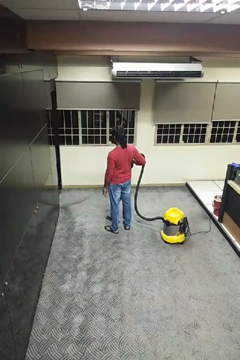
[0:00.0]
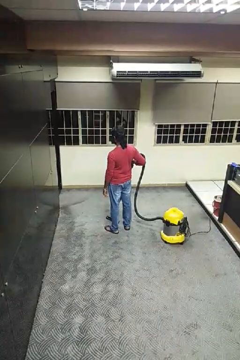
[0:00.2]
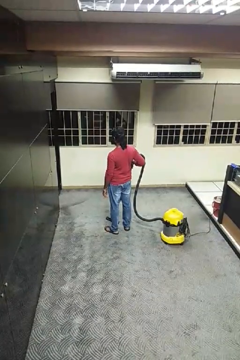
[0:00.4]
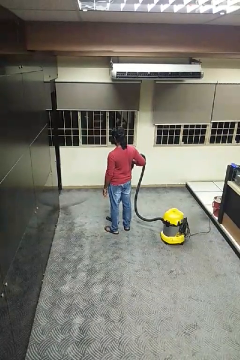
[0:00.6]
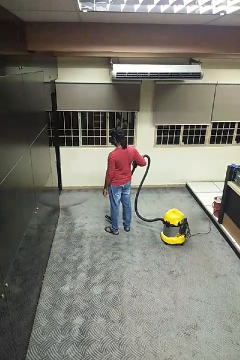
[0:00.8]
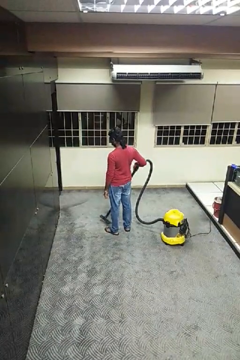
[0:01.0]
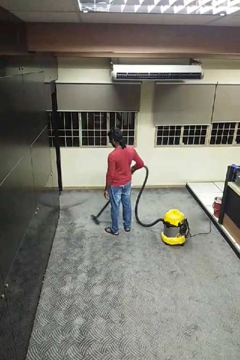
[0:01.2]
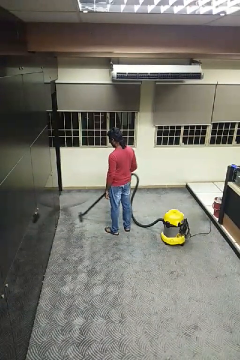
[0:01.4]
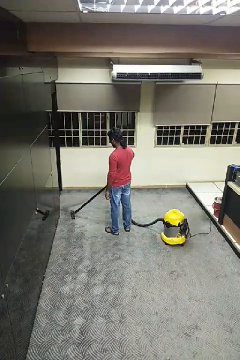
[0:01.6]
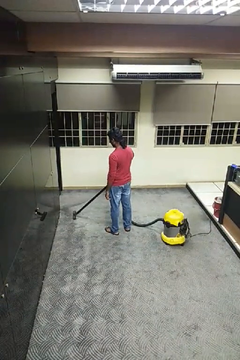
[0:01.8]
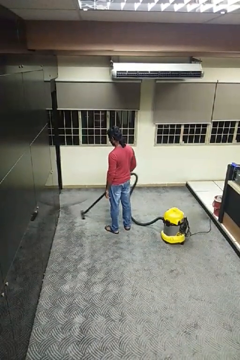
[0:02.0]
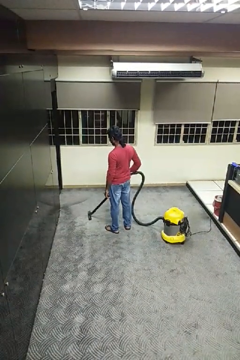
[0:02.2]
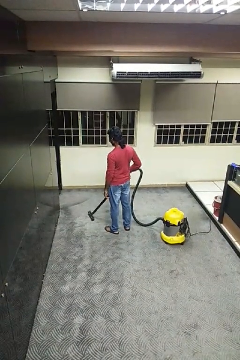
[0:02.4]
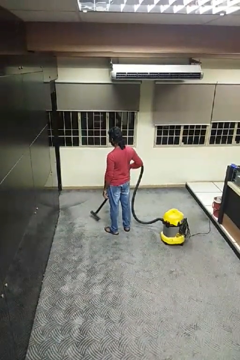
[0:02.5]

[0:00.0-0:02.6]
person vacuums carpet

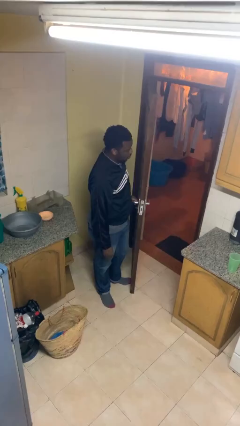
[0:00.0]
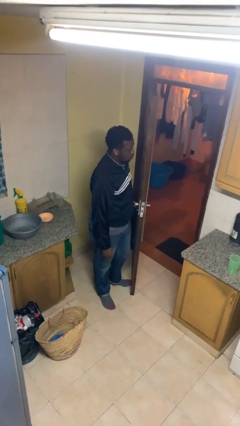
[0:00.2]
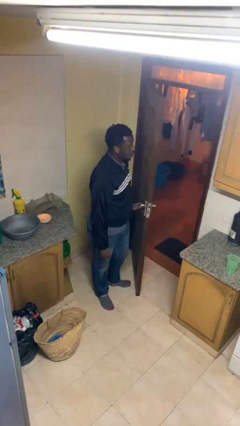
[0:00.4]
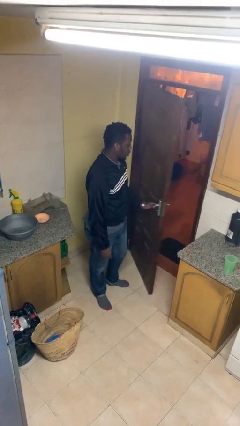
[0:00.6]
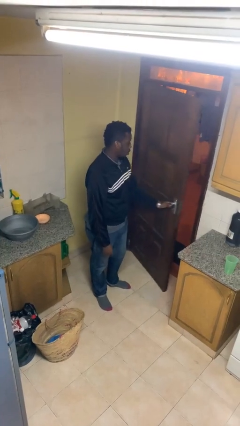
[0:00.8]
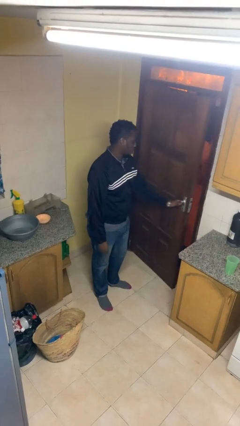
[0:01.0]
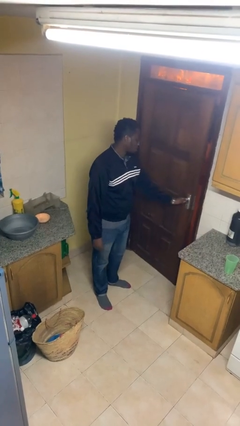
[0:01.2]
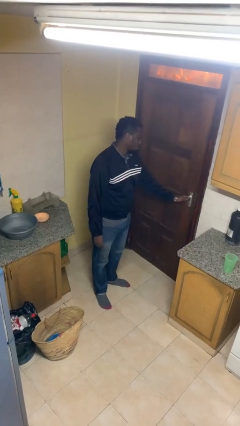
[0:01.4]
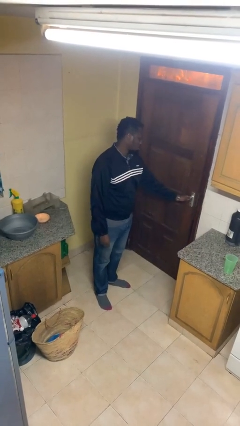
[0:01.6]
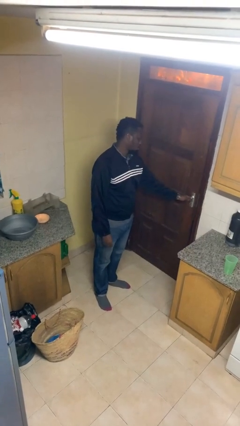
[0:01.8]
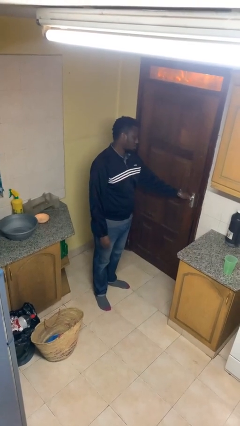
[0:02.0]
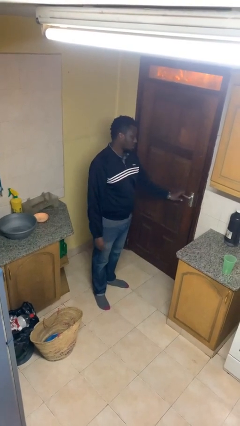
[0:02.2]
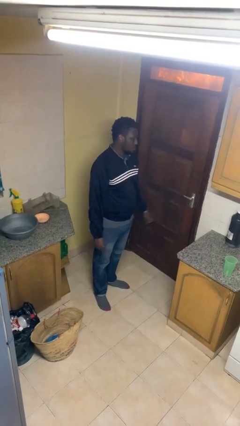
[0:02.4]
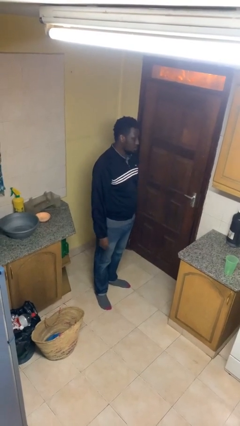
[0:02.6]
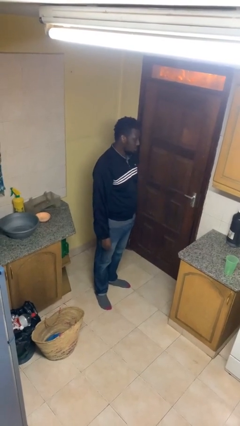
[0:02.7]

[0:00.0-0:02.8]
person closes facility door

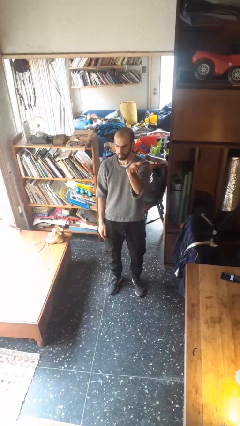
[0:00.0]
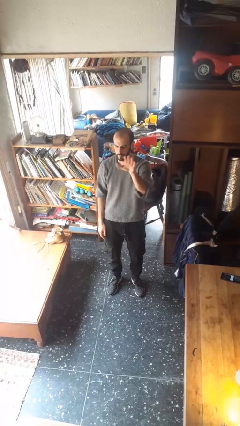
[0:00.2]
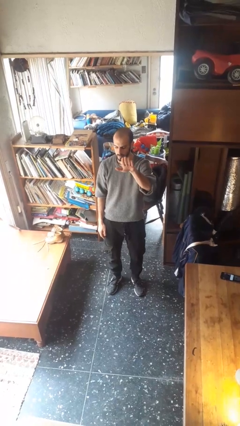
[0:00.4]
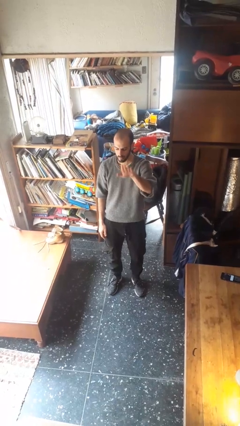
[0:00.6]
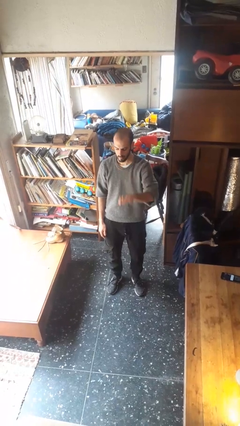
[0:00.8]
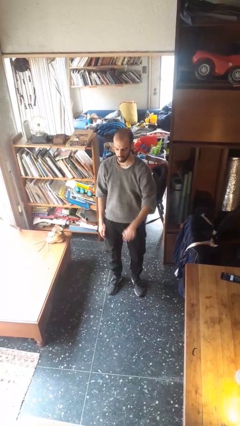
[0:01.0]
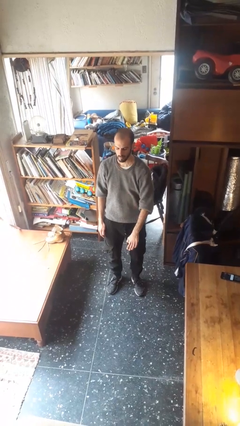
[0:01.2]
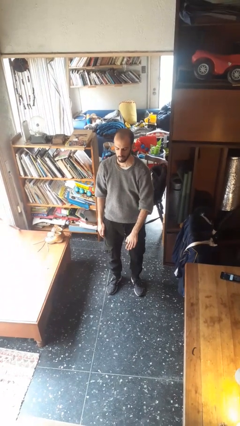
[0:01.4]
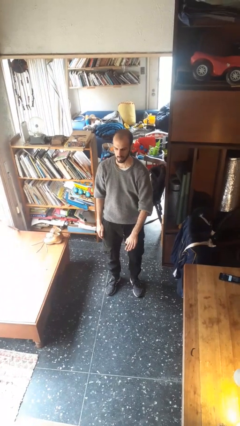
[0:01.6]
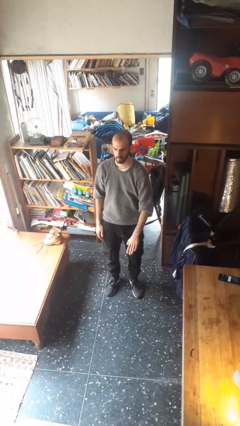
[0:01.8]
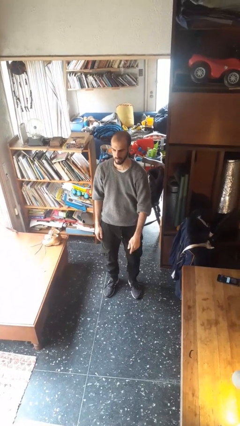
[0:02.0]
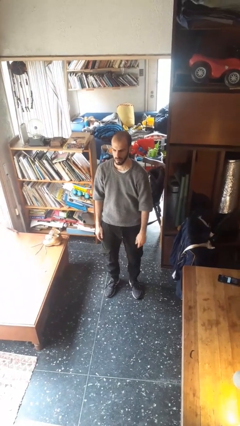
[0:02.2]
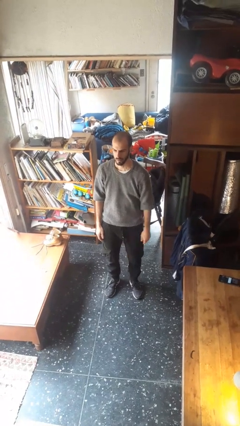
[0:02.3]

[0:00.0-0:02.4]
person gestures swipe down

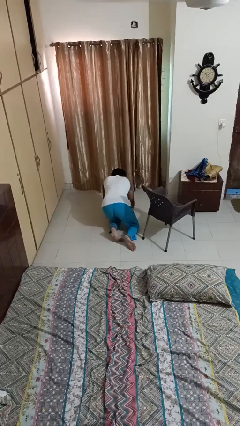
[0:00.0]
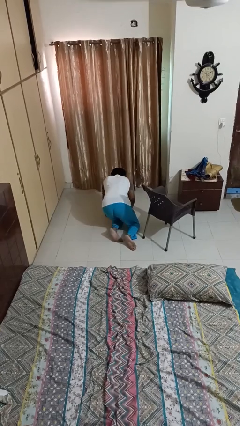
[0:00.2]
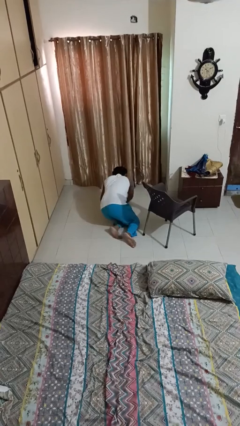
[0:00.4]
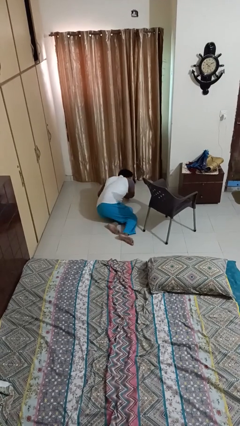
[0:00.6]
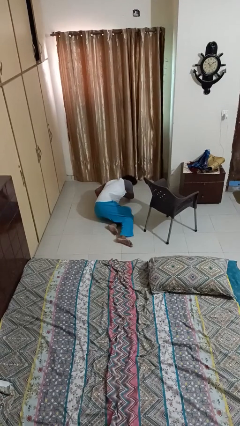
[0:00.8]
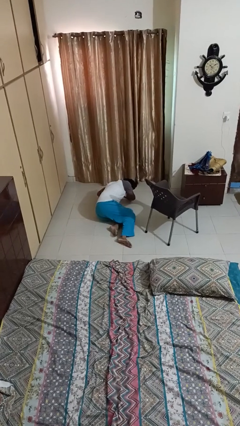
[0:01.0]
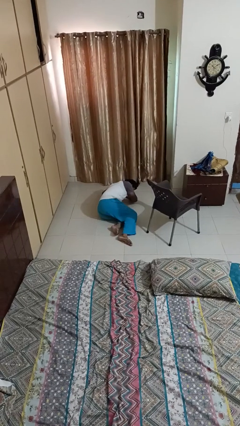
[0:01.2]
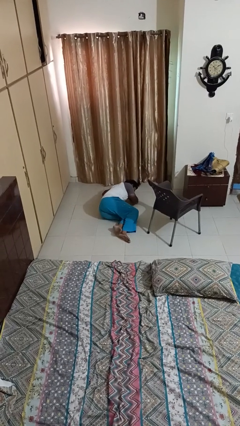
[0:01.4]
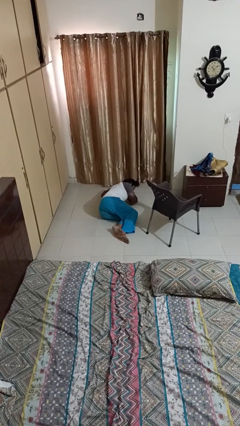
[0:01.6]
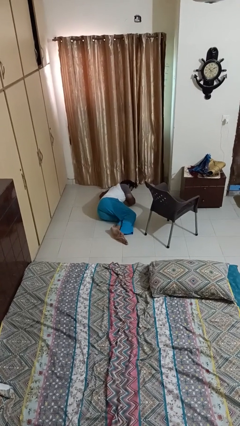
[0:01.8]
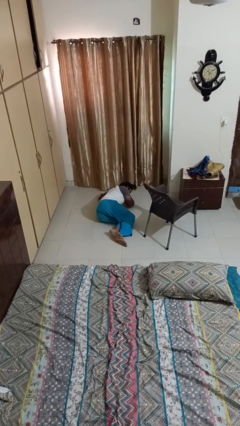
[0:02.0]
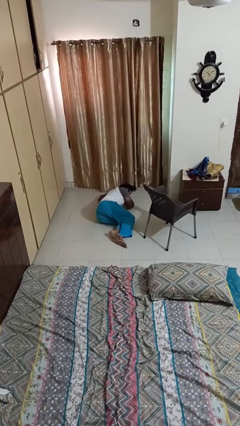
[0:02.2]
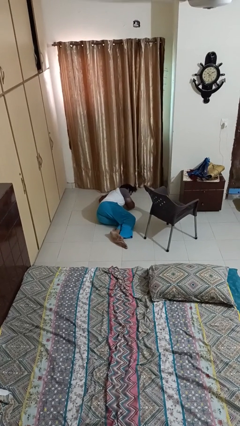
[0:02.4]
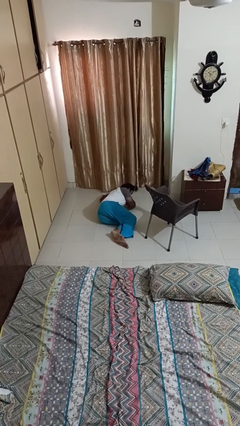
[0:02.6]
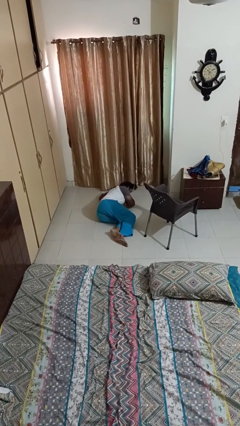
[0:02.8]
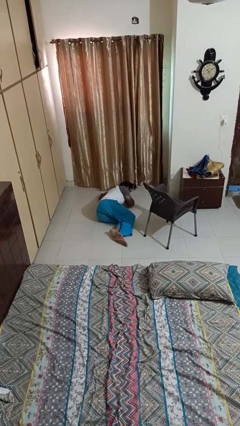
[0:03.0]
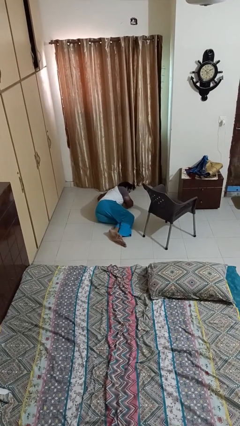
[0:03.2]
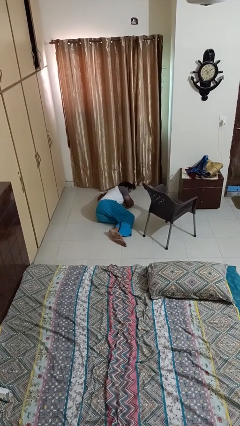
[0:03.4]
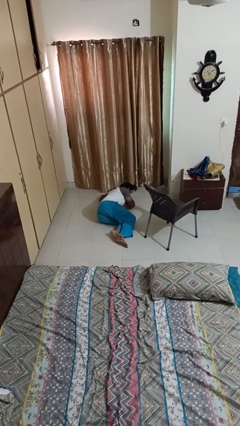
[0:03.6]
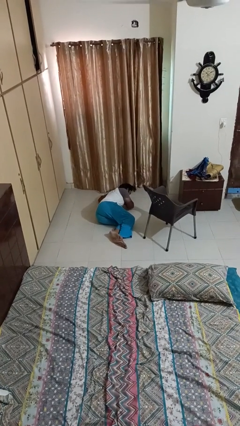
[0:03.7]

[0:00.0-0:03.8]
person lies down on floor

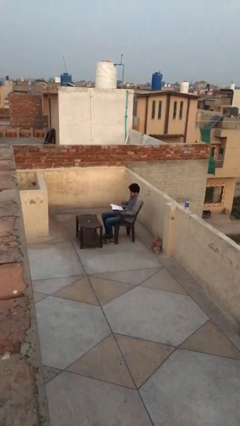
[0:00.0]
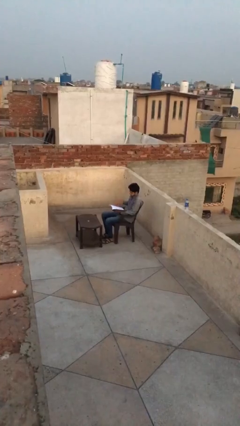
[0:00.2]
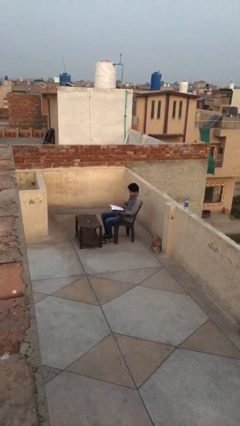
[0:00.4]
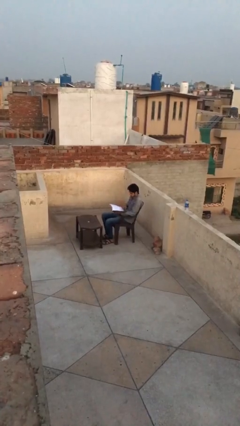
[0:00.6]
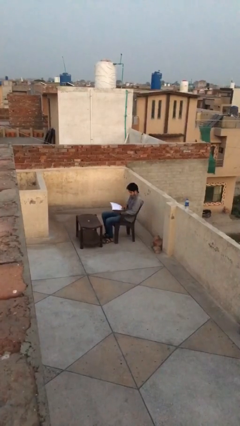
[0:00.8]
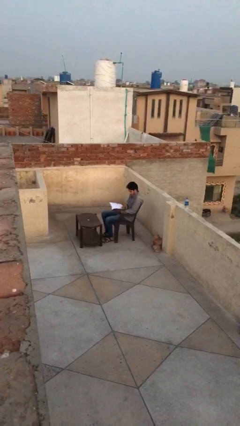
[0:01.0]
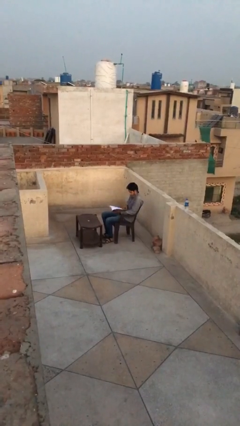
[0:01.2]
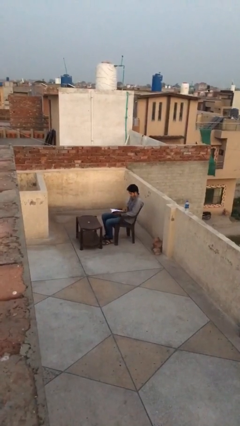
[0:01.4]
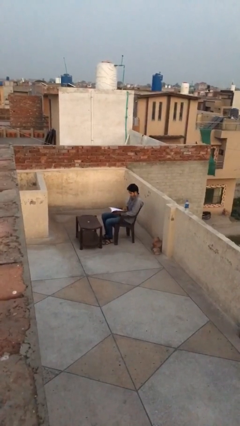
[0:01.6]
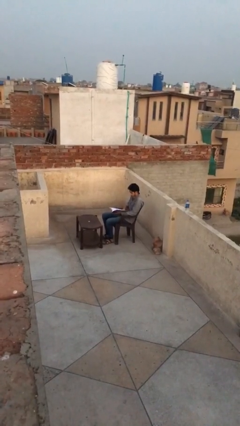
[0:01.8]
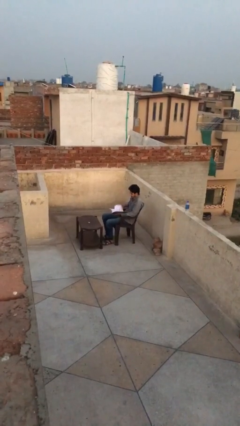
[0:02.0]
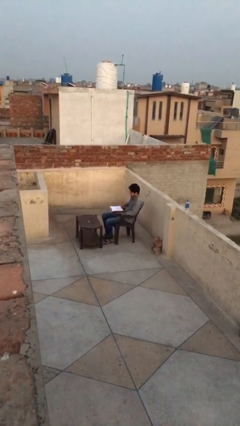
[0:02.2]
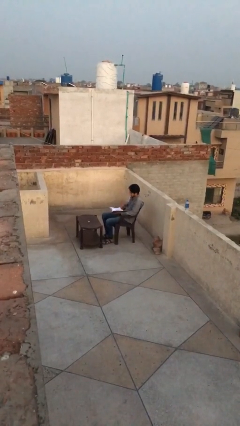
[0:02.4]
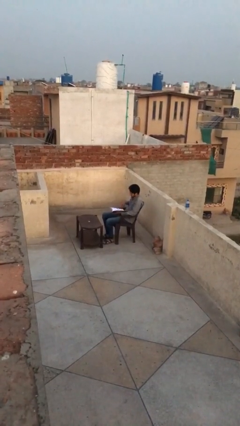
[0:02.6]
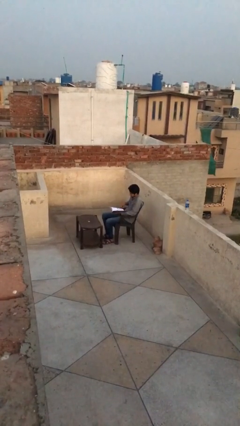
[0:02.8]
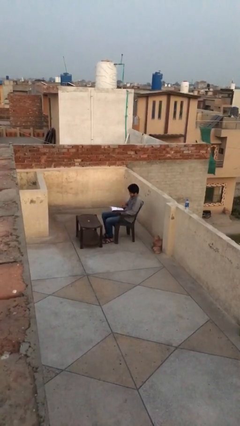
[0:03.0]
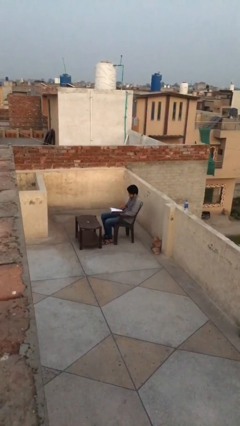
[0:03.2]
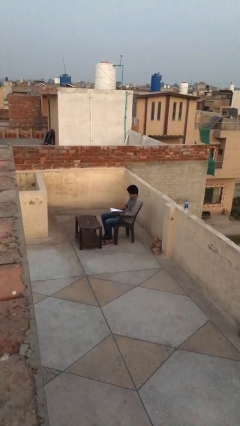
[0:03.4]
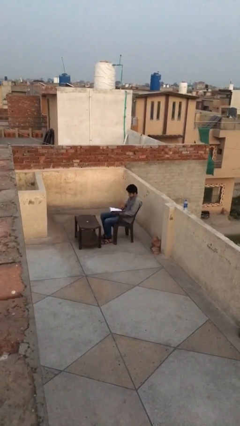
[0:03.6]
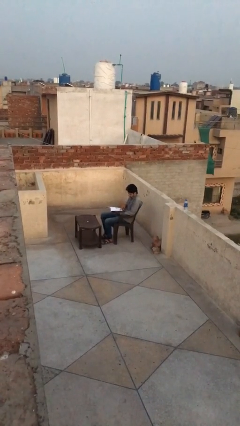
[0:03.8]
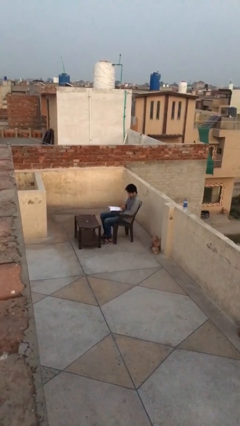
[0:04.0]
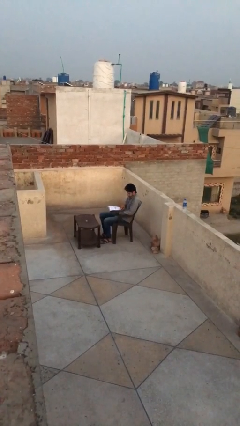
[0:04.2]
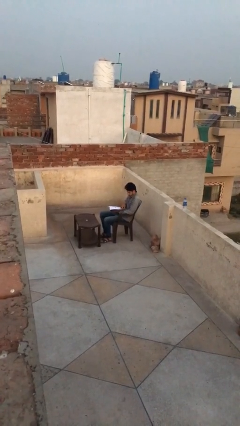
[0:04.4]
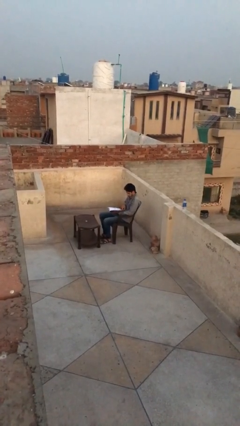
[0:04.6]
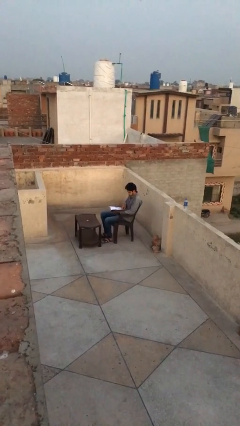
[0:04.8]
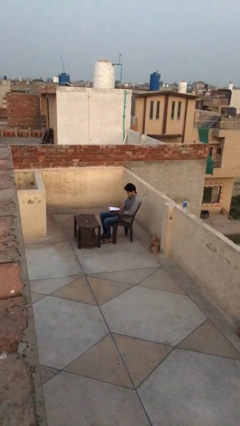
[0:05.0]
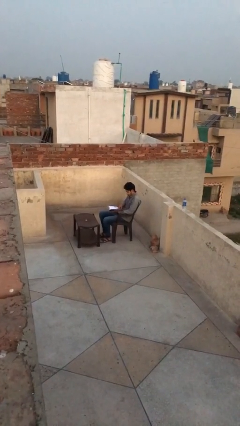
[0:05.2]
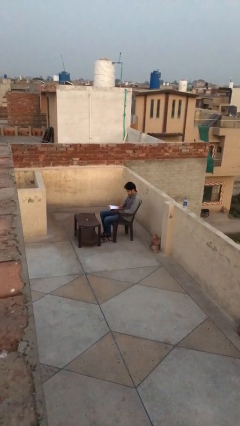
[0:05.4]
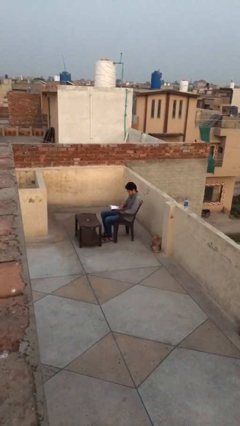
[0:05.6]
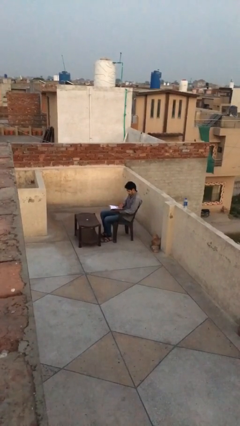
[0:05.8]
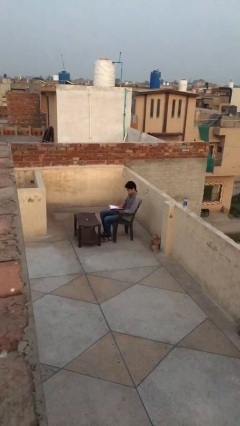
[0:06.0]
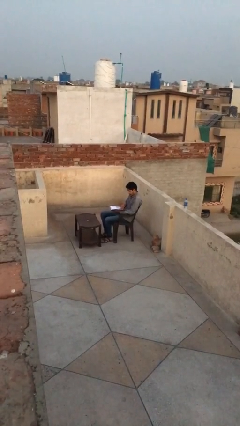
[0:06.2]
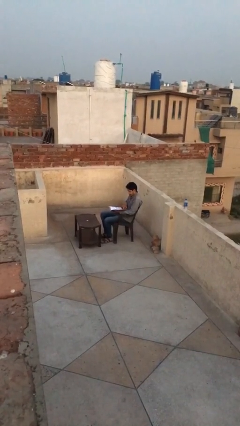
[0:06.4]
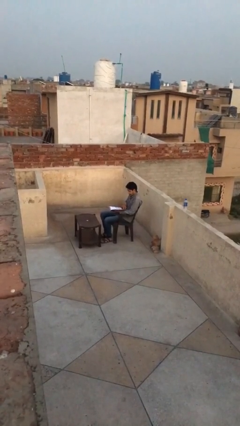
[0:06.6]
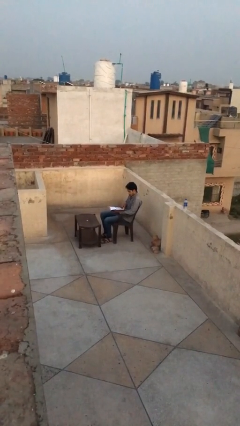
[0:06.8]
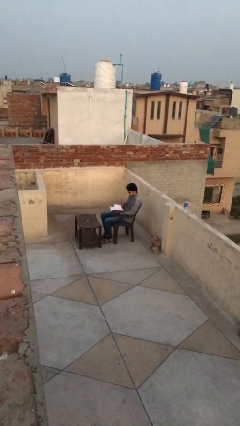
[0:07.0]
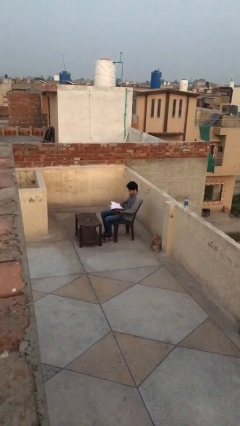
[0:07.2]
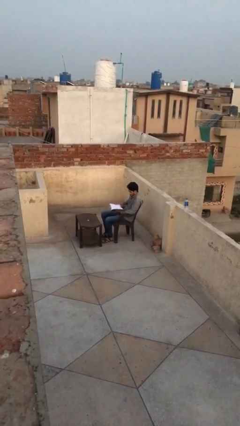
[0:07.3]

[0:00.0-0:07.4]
person reads document
